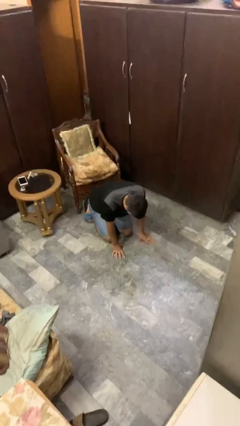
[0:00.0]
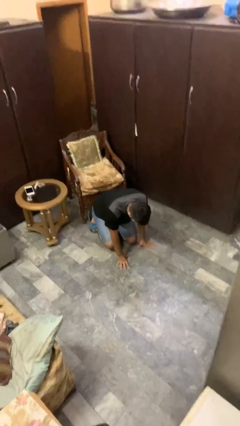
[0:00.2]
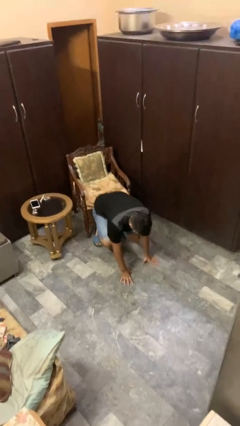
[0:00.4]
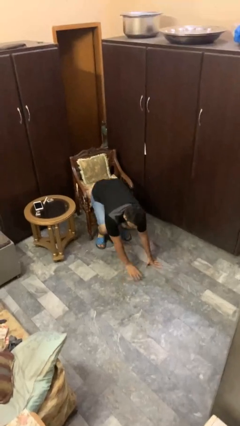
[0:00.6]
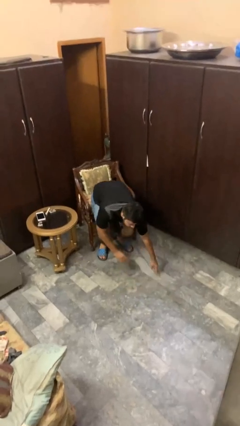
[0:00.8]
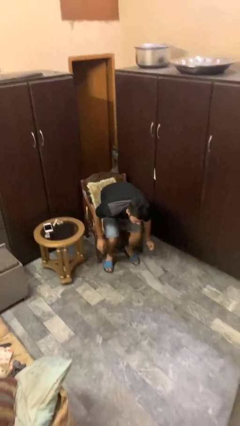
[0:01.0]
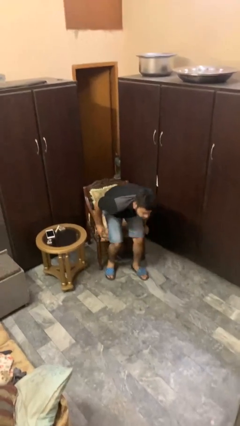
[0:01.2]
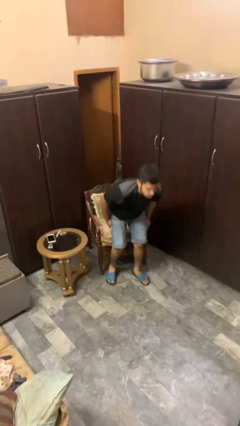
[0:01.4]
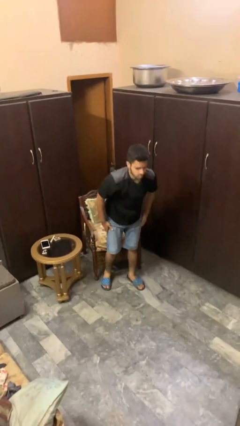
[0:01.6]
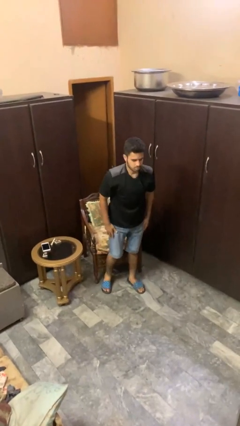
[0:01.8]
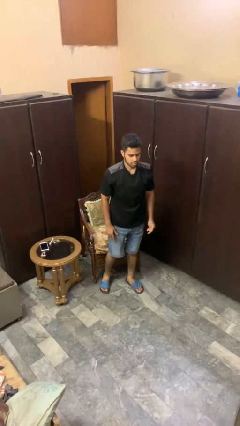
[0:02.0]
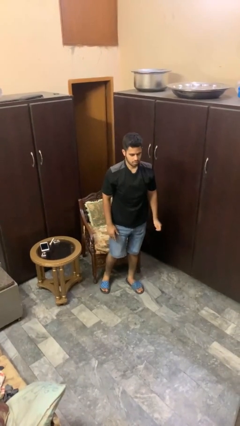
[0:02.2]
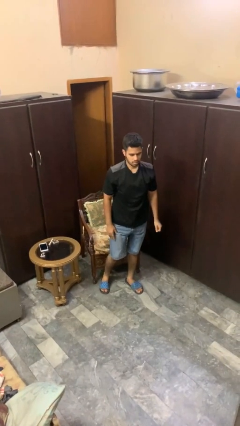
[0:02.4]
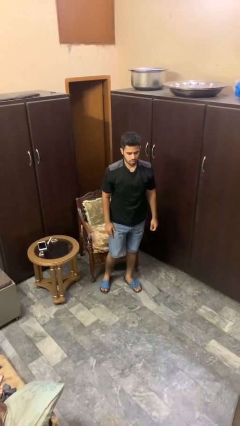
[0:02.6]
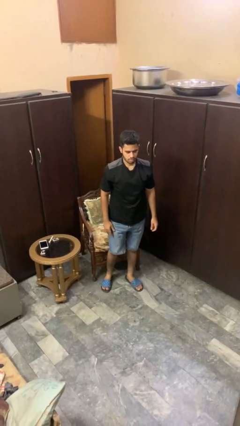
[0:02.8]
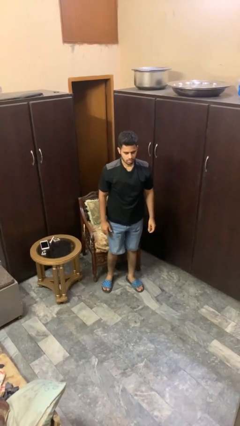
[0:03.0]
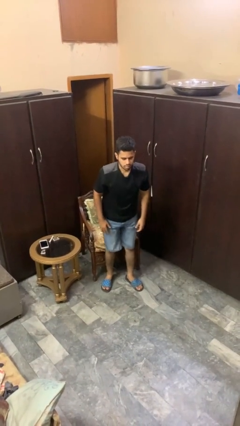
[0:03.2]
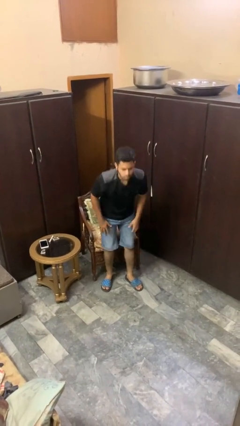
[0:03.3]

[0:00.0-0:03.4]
person stands up from floor

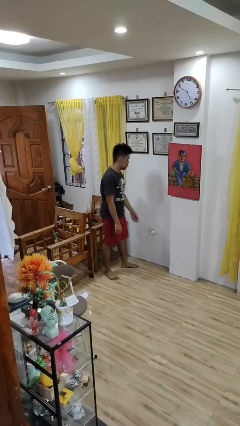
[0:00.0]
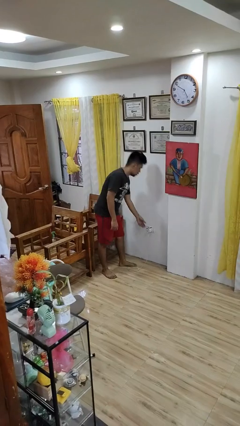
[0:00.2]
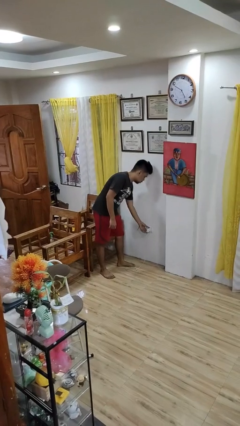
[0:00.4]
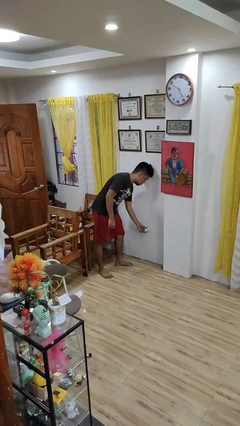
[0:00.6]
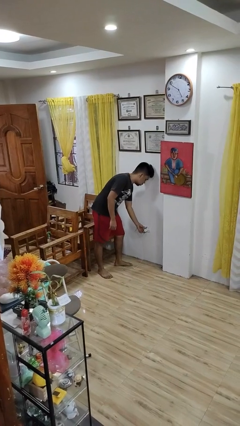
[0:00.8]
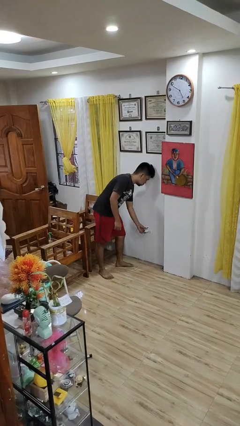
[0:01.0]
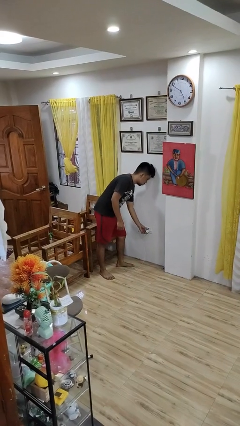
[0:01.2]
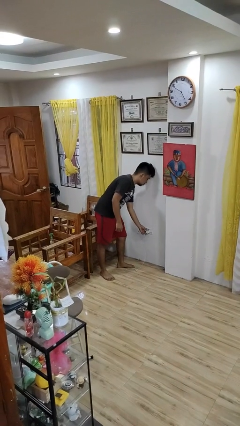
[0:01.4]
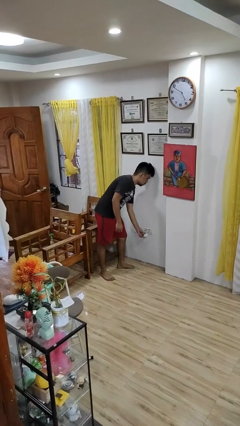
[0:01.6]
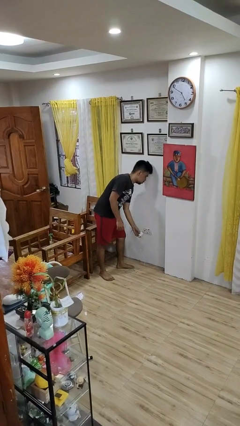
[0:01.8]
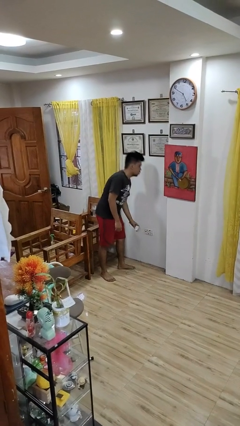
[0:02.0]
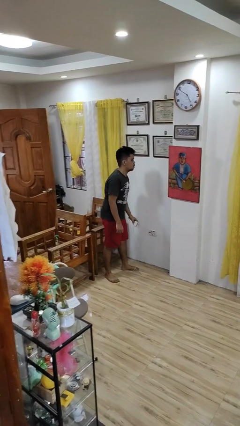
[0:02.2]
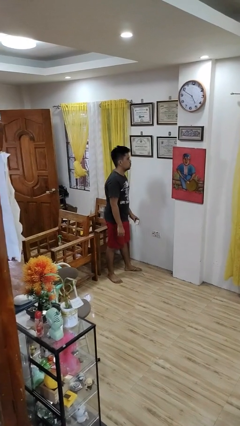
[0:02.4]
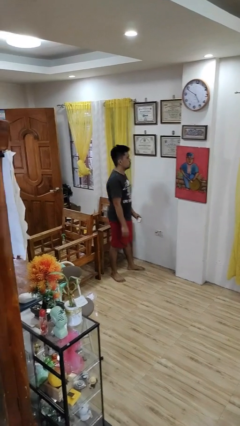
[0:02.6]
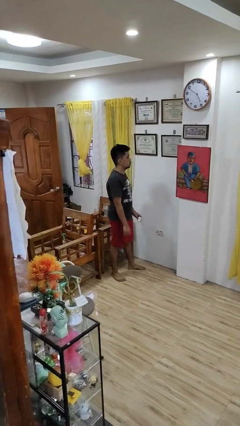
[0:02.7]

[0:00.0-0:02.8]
person unplugs from electrical socket

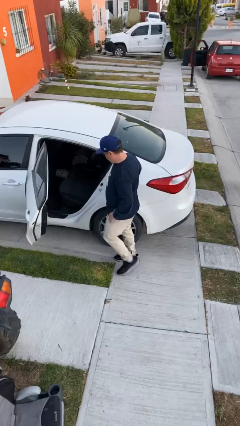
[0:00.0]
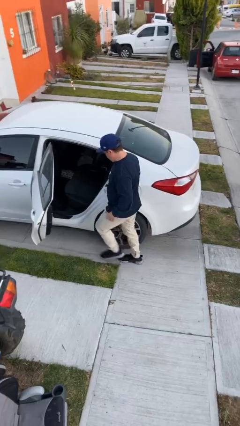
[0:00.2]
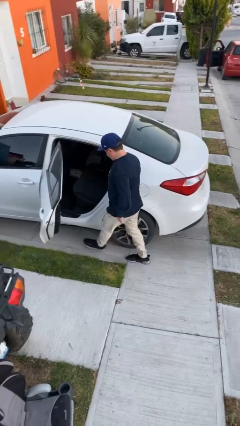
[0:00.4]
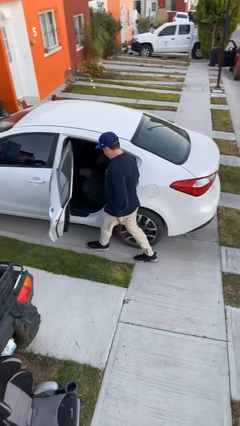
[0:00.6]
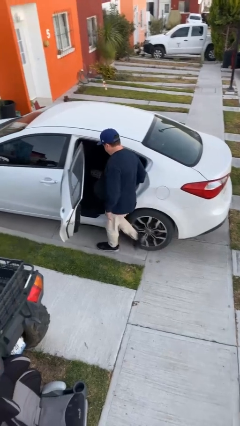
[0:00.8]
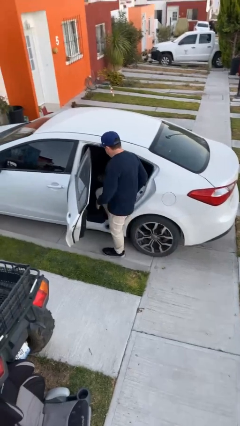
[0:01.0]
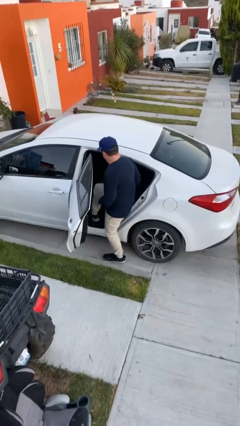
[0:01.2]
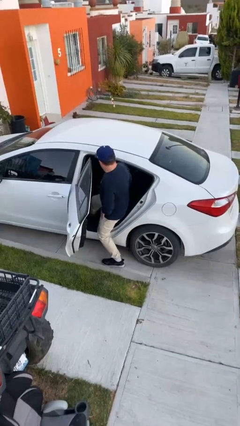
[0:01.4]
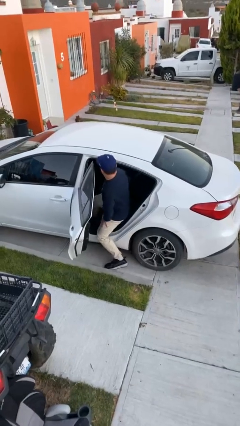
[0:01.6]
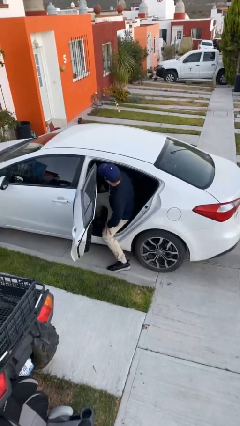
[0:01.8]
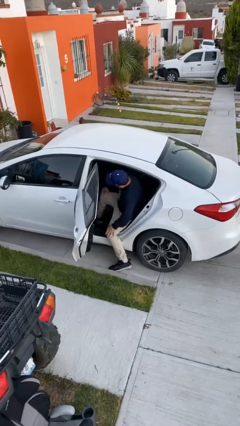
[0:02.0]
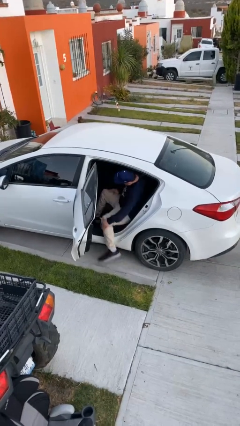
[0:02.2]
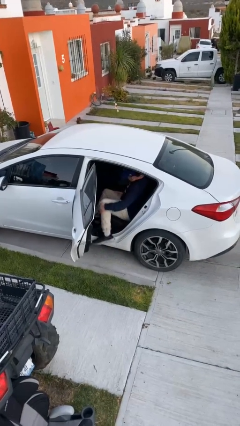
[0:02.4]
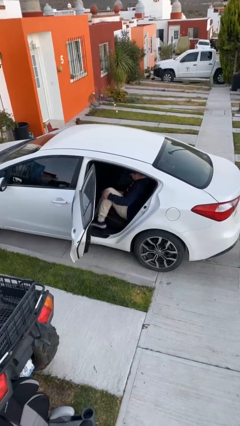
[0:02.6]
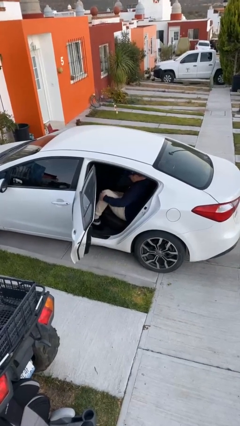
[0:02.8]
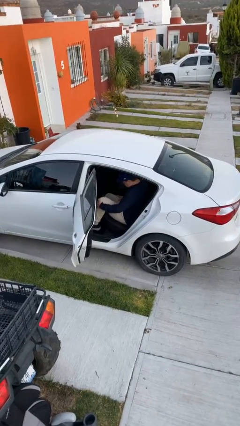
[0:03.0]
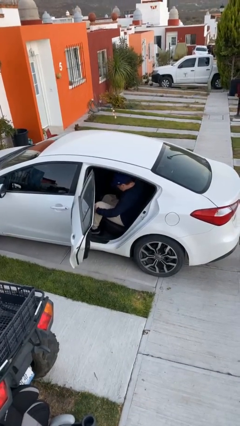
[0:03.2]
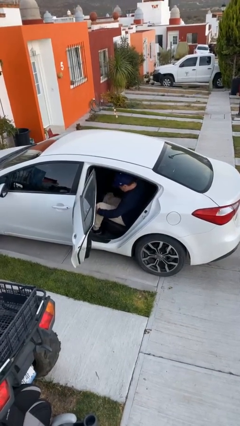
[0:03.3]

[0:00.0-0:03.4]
person enters car

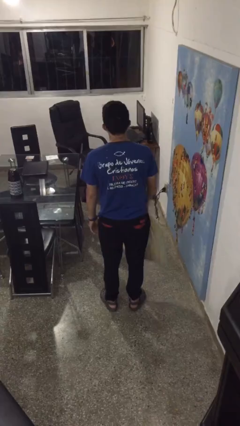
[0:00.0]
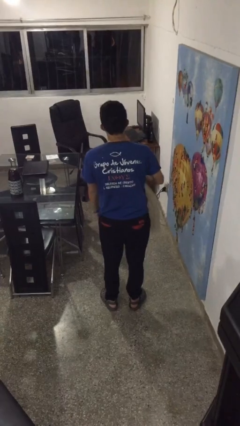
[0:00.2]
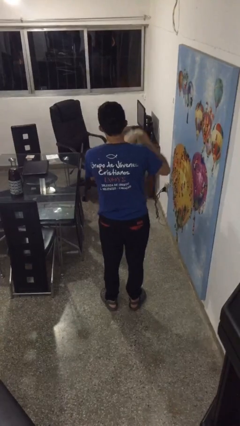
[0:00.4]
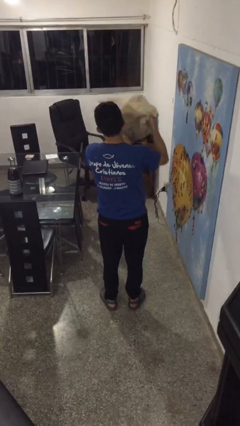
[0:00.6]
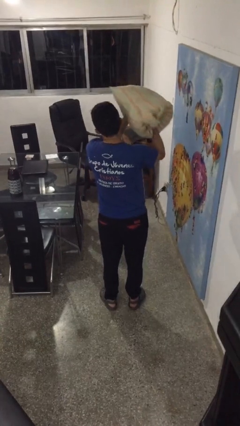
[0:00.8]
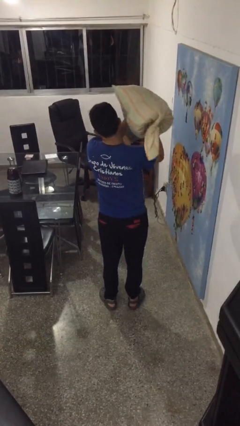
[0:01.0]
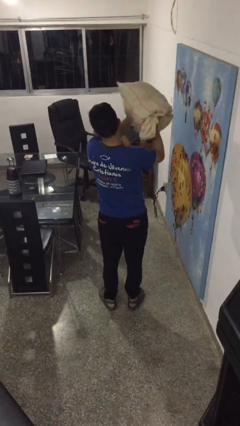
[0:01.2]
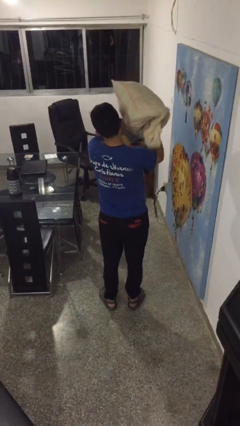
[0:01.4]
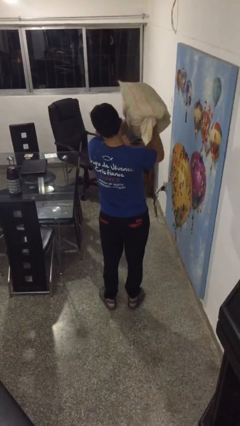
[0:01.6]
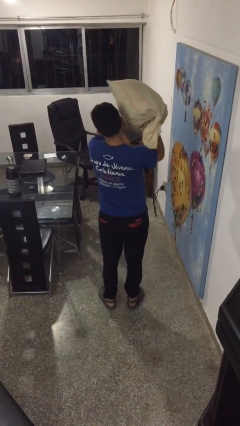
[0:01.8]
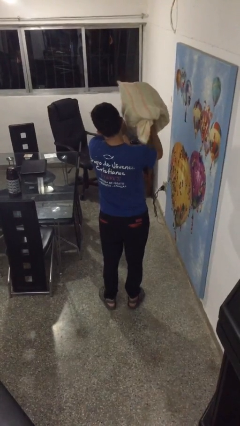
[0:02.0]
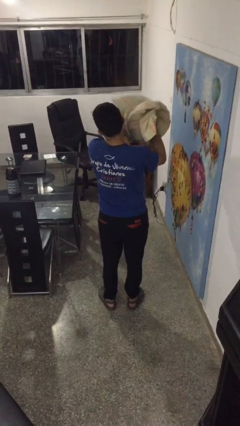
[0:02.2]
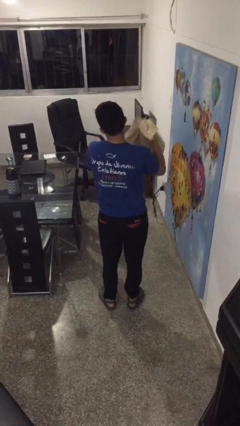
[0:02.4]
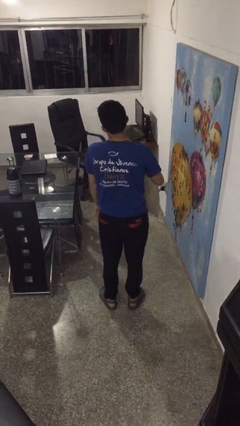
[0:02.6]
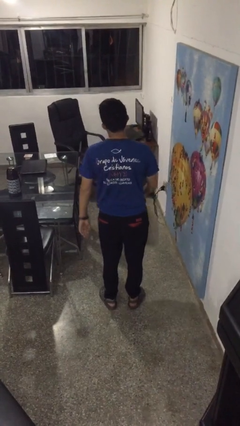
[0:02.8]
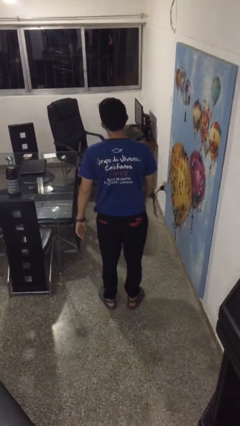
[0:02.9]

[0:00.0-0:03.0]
person squeezes object

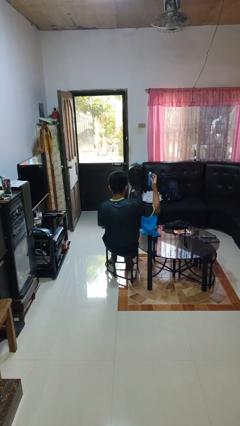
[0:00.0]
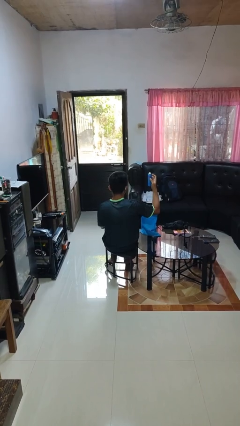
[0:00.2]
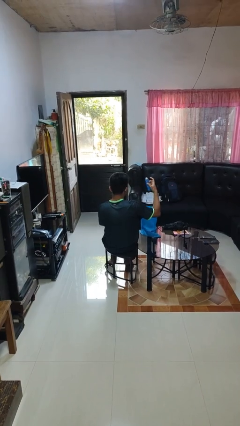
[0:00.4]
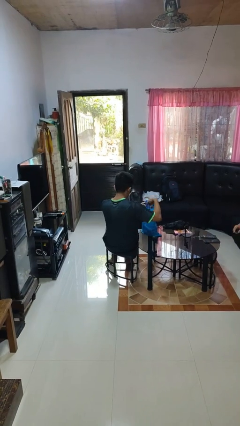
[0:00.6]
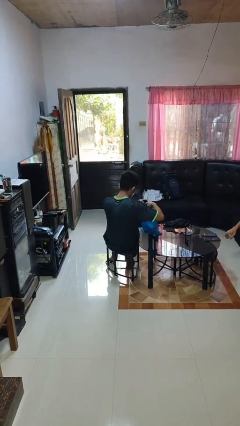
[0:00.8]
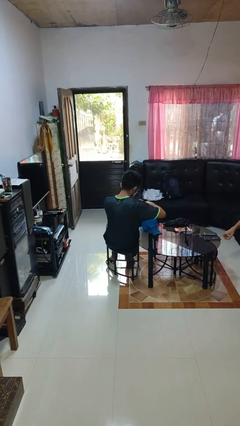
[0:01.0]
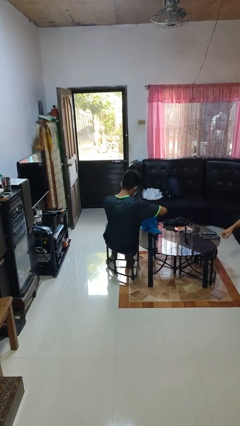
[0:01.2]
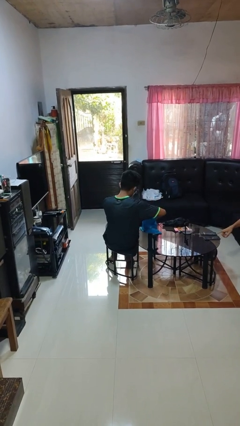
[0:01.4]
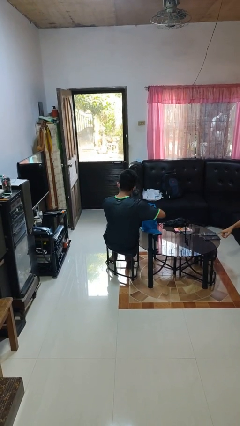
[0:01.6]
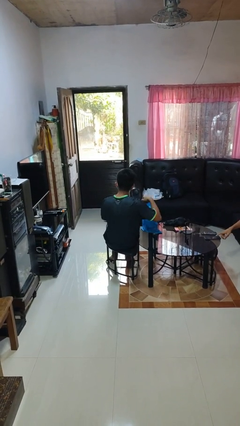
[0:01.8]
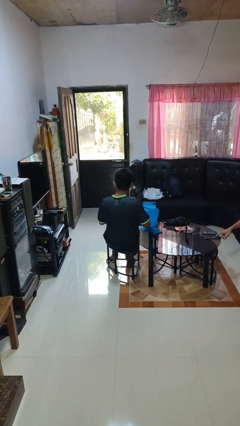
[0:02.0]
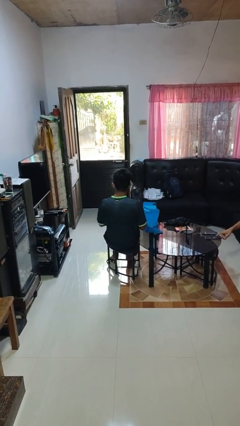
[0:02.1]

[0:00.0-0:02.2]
person puts object into bag

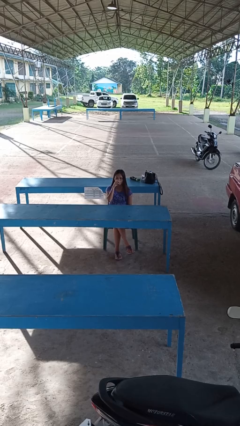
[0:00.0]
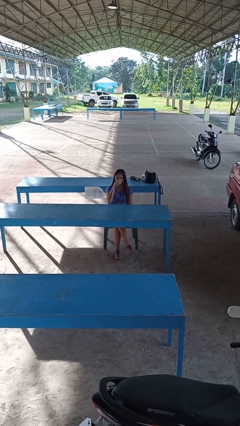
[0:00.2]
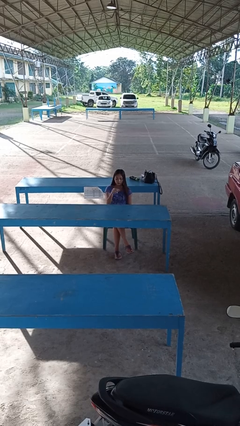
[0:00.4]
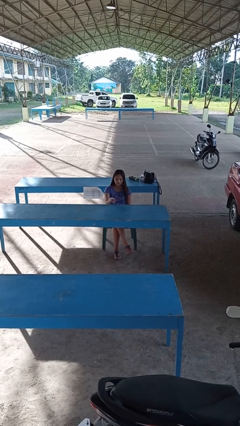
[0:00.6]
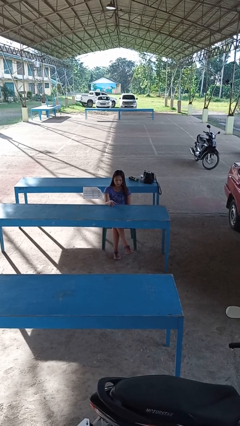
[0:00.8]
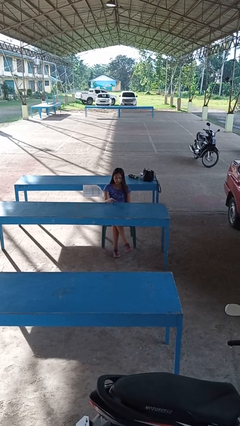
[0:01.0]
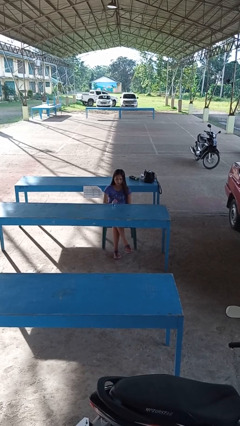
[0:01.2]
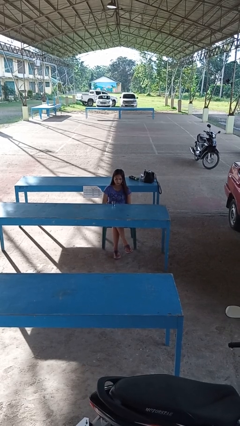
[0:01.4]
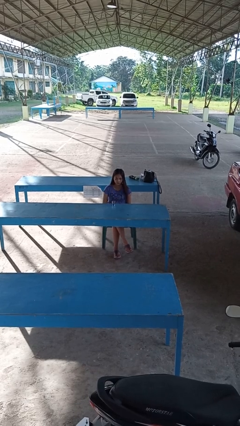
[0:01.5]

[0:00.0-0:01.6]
person puts down object on table

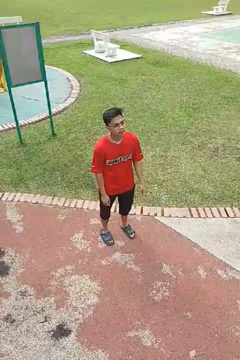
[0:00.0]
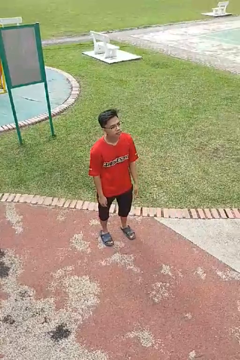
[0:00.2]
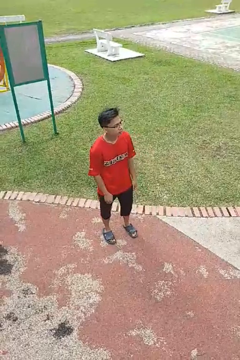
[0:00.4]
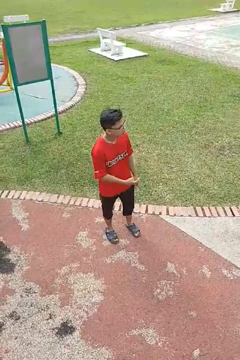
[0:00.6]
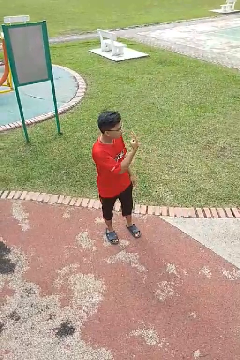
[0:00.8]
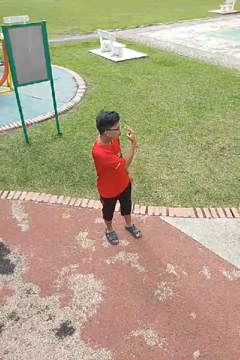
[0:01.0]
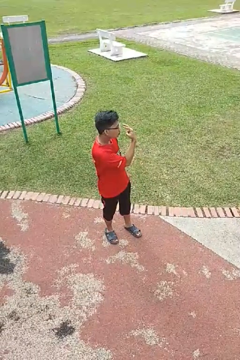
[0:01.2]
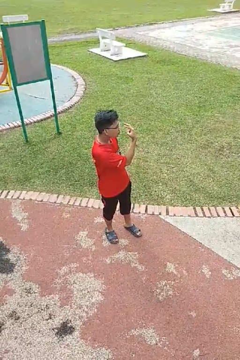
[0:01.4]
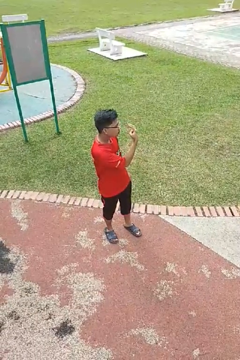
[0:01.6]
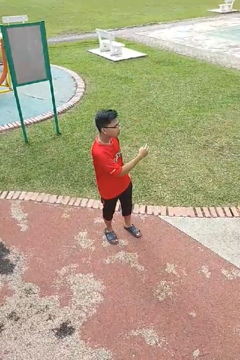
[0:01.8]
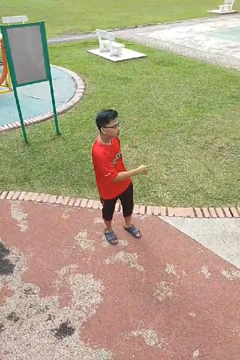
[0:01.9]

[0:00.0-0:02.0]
person gestures watch closely
